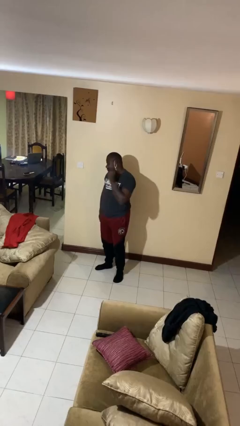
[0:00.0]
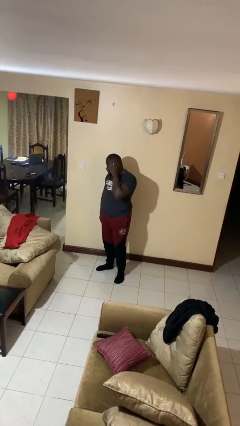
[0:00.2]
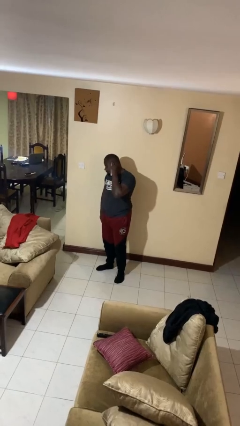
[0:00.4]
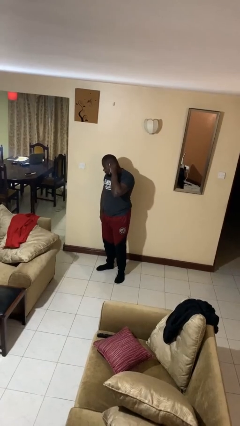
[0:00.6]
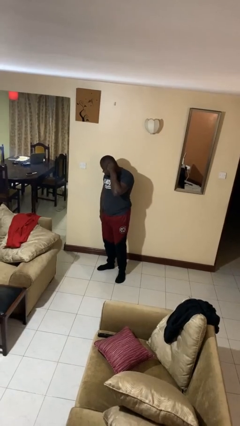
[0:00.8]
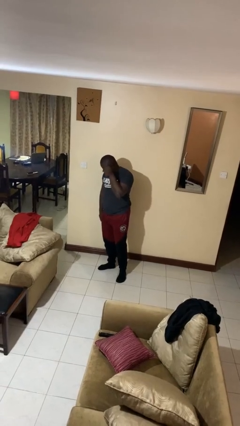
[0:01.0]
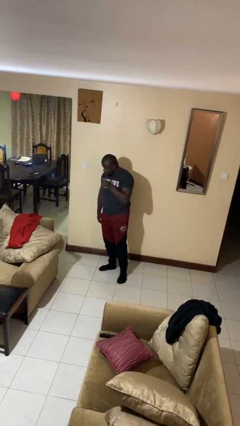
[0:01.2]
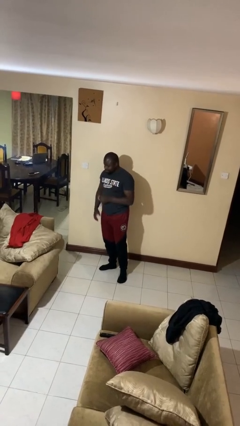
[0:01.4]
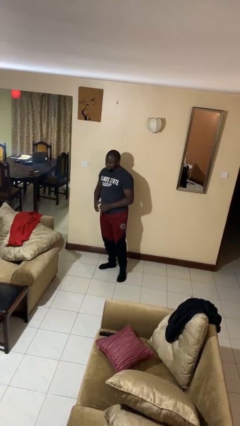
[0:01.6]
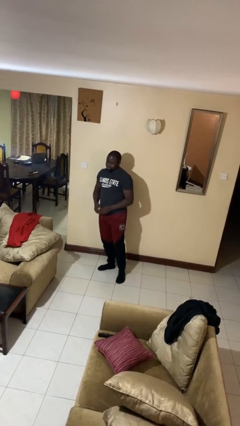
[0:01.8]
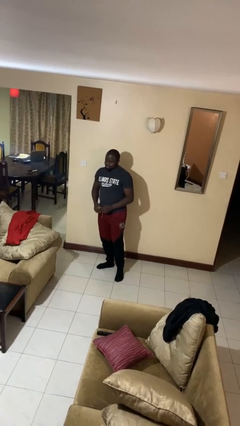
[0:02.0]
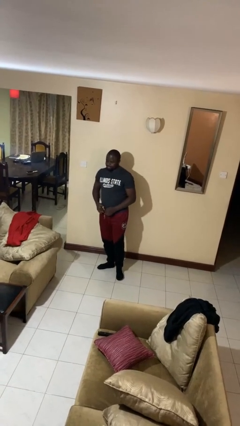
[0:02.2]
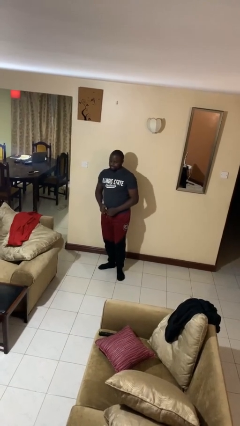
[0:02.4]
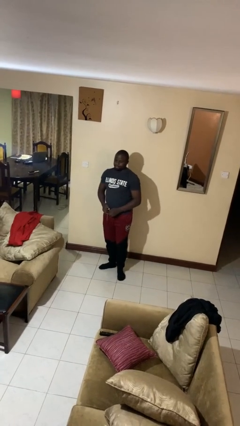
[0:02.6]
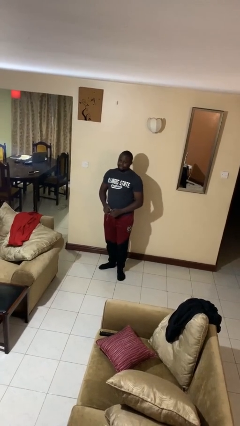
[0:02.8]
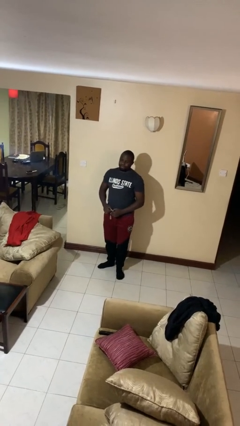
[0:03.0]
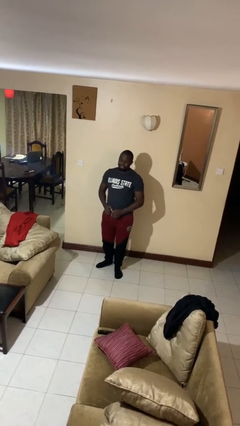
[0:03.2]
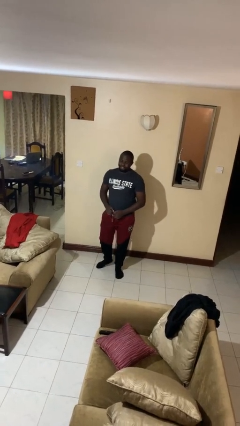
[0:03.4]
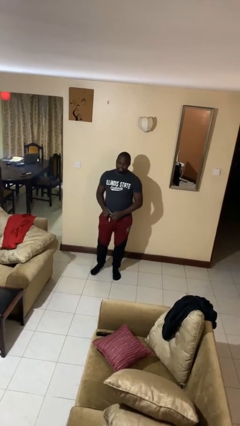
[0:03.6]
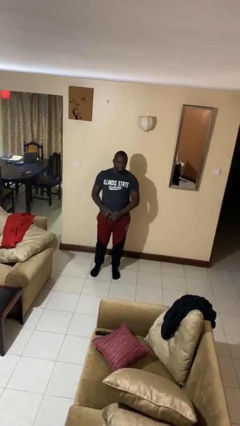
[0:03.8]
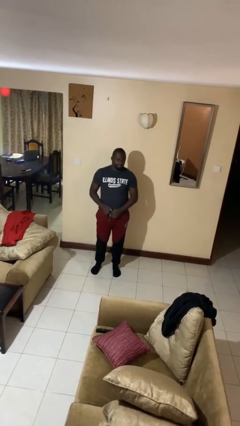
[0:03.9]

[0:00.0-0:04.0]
person takes off earrings

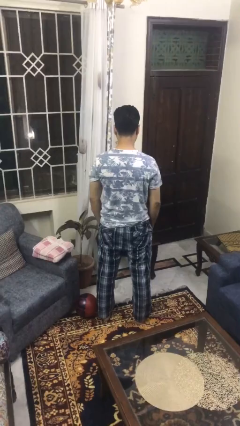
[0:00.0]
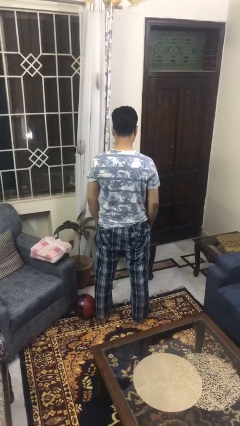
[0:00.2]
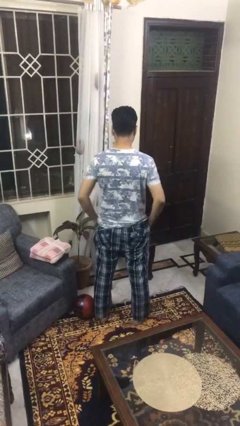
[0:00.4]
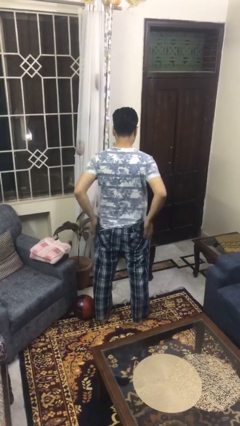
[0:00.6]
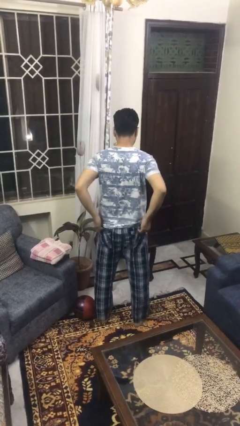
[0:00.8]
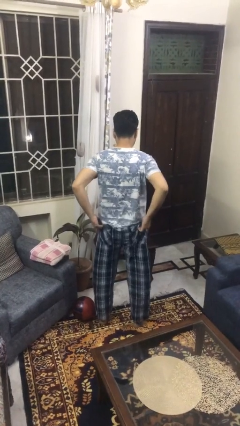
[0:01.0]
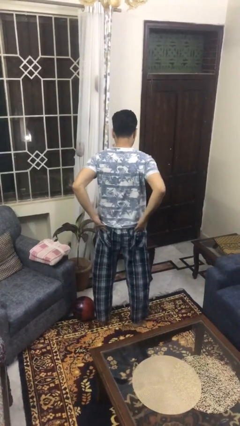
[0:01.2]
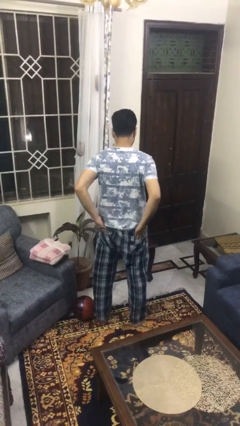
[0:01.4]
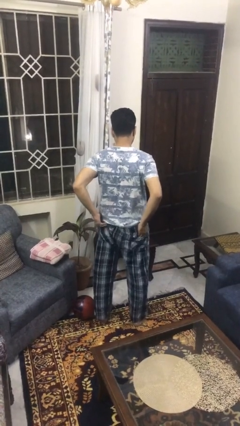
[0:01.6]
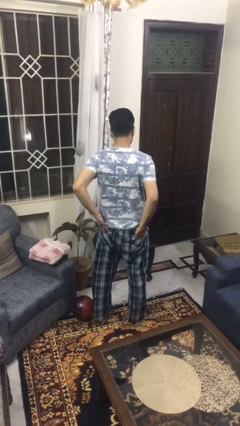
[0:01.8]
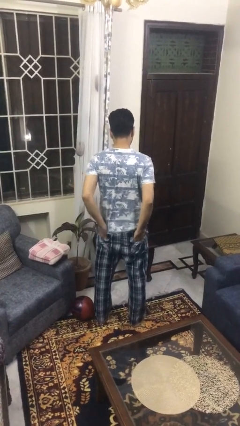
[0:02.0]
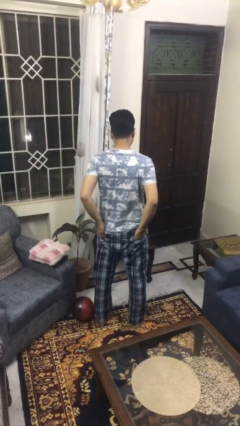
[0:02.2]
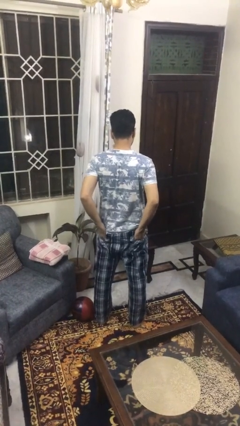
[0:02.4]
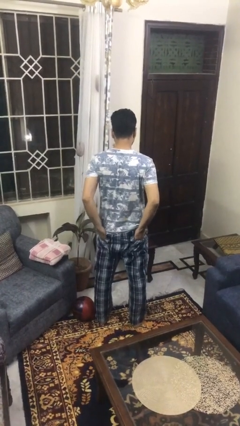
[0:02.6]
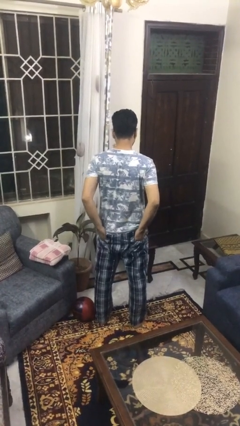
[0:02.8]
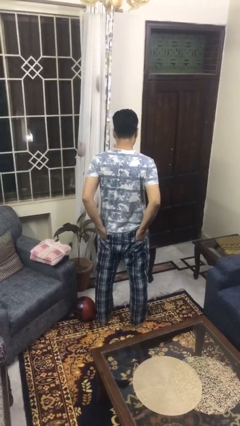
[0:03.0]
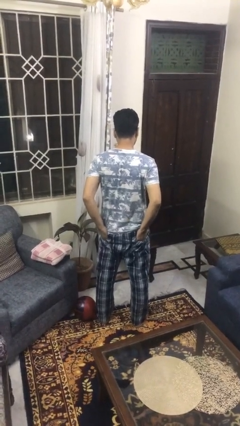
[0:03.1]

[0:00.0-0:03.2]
person puts hands in back pockets

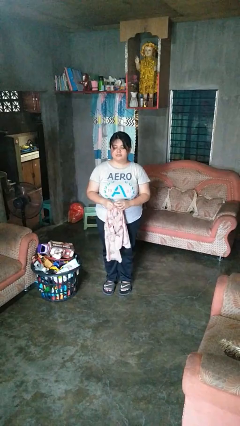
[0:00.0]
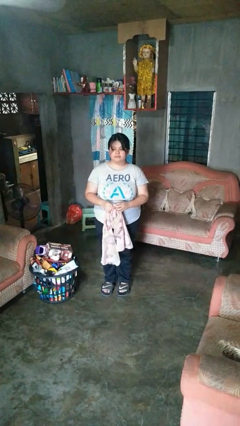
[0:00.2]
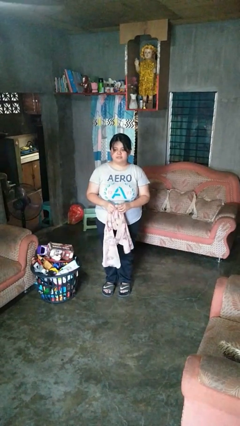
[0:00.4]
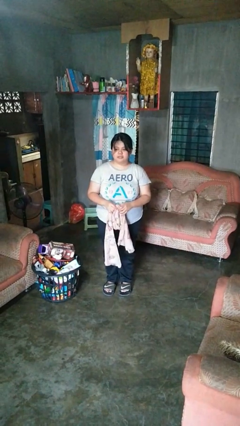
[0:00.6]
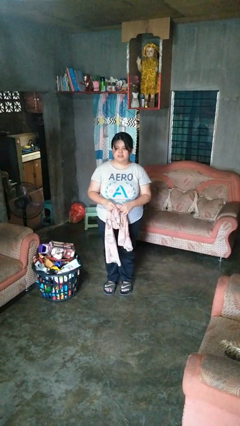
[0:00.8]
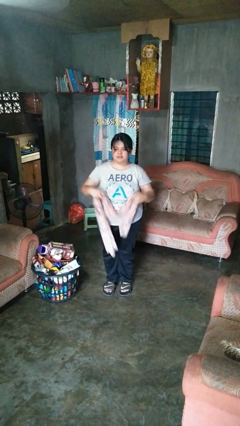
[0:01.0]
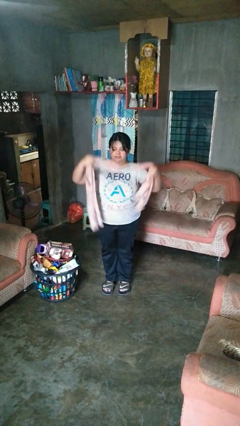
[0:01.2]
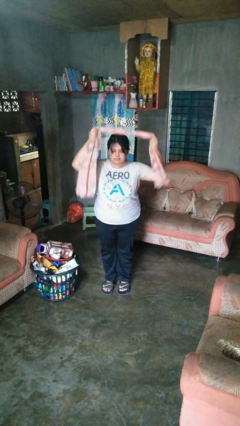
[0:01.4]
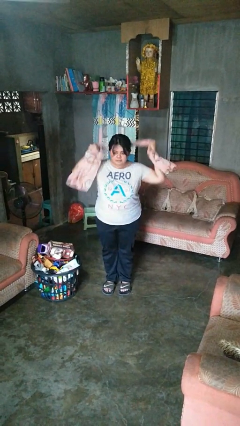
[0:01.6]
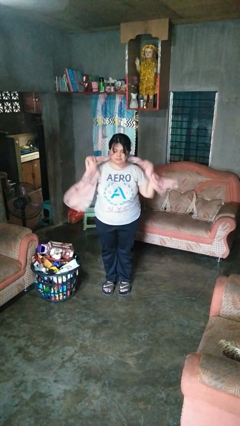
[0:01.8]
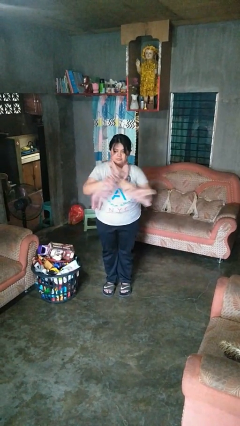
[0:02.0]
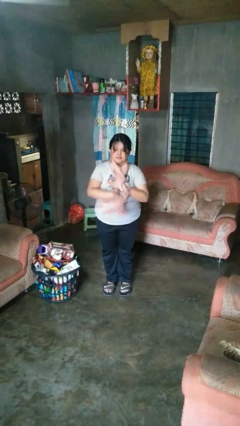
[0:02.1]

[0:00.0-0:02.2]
person puts on scarf

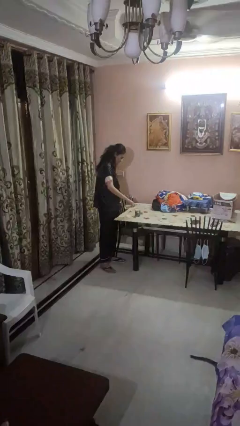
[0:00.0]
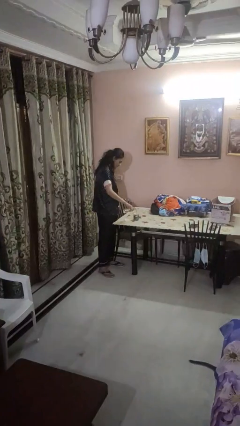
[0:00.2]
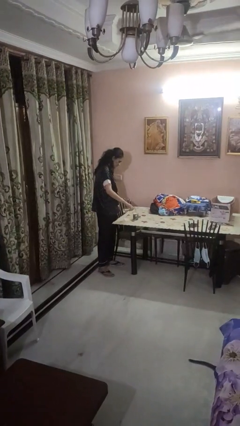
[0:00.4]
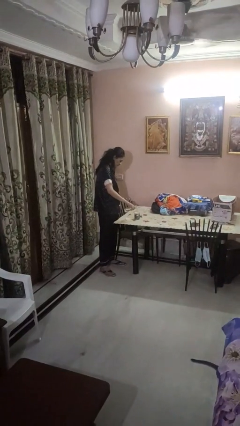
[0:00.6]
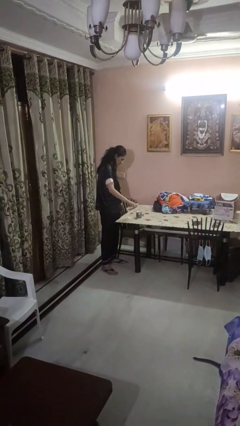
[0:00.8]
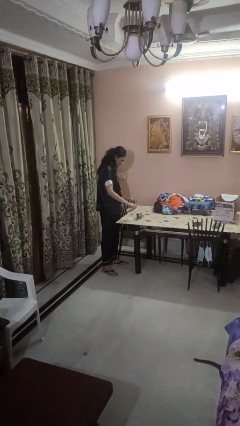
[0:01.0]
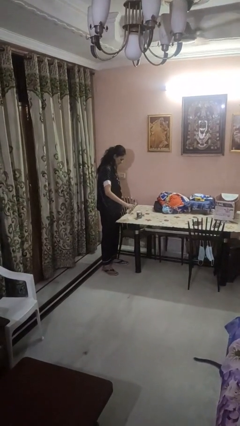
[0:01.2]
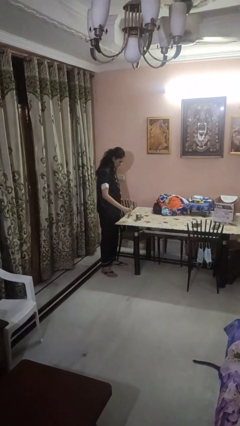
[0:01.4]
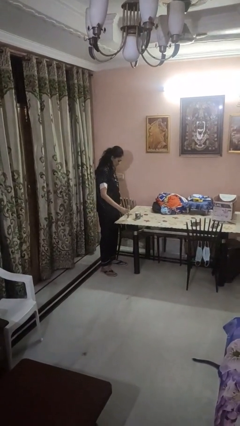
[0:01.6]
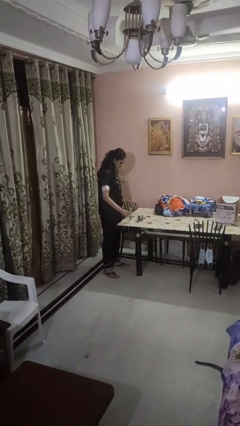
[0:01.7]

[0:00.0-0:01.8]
person pours liquid into cup

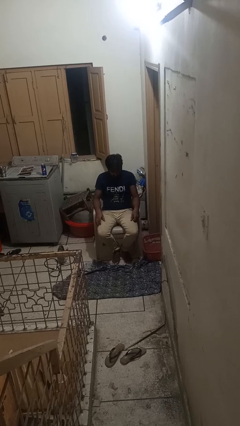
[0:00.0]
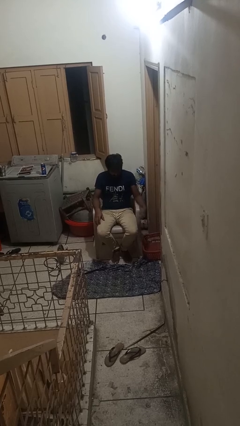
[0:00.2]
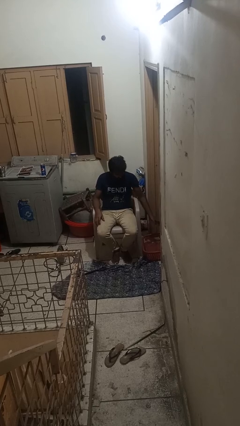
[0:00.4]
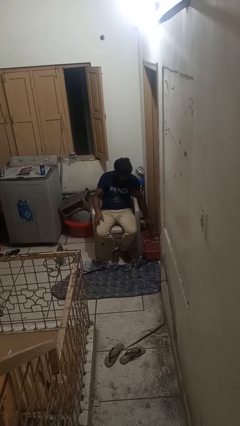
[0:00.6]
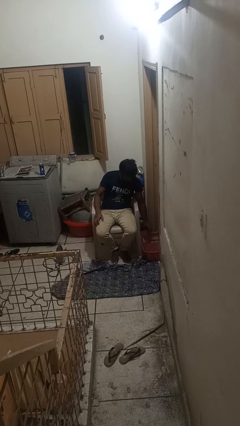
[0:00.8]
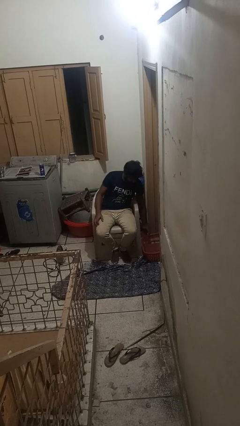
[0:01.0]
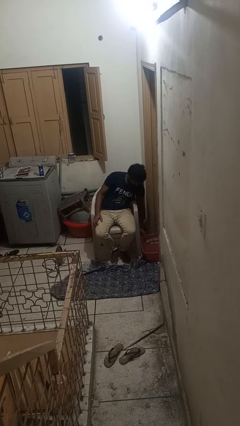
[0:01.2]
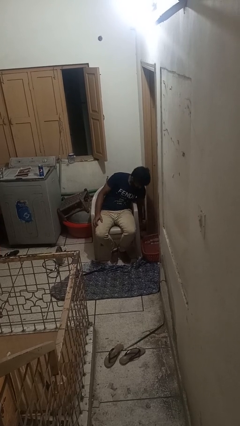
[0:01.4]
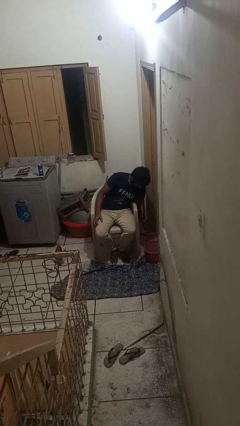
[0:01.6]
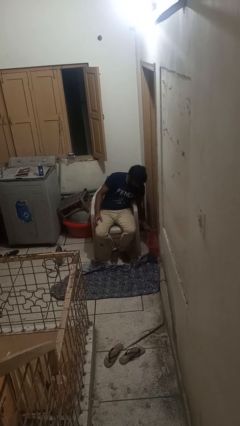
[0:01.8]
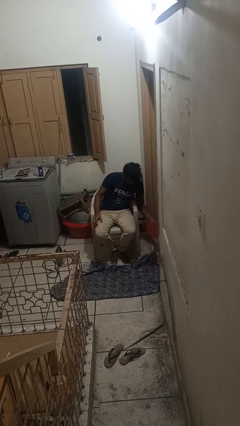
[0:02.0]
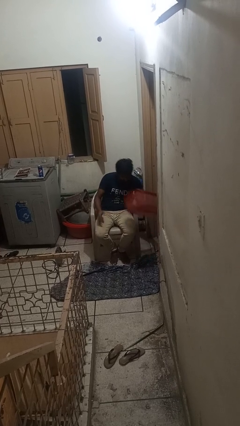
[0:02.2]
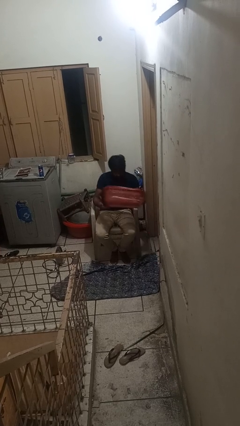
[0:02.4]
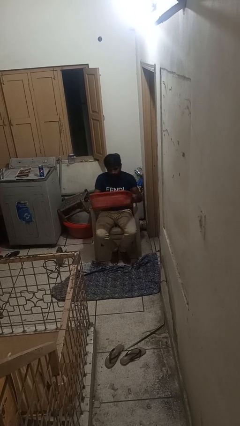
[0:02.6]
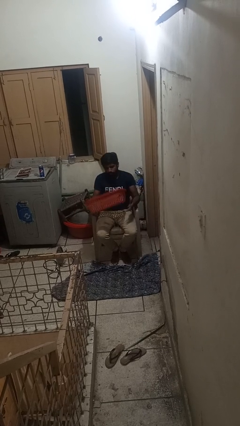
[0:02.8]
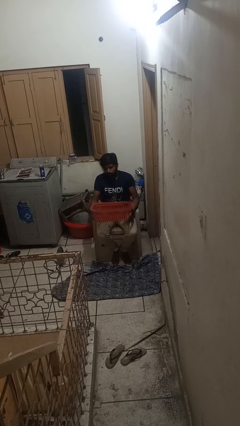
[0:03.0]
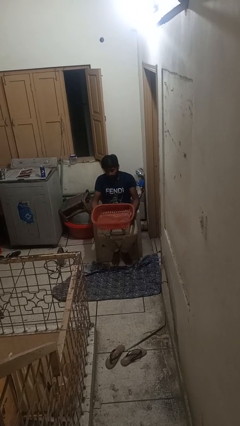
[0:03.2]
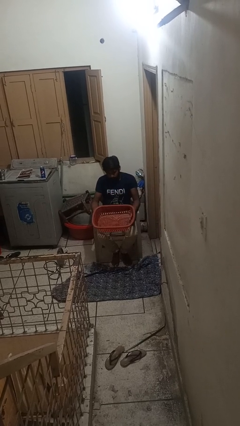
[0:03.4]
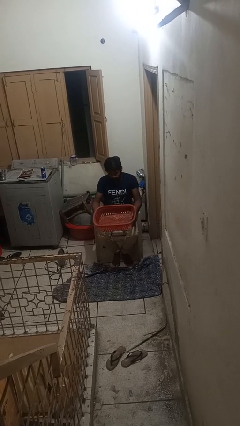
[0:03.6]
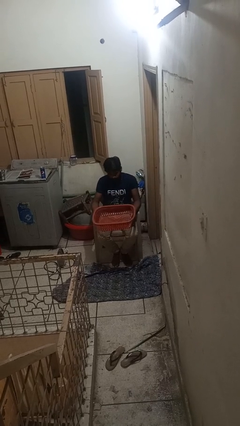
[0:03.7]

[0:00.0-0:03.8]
person picks up object from floor

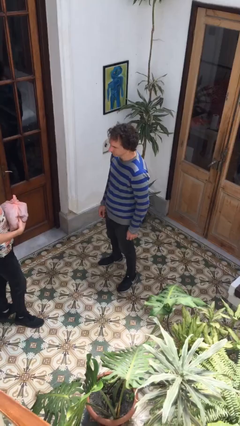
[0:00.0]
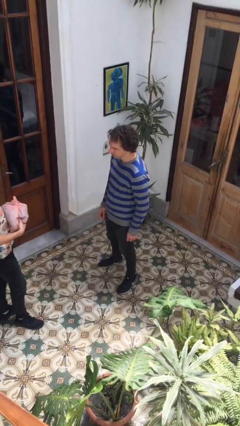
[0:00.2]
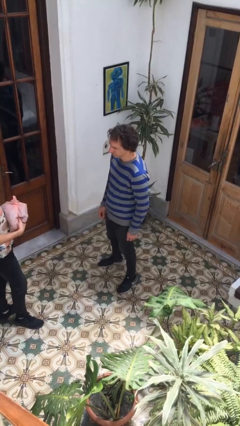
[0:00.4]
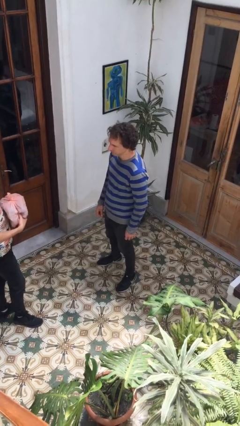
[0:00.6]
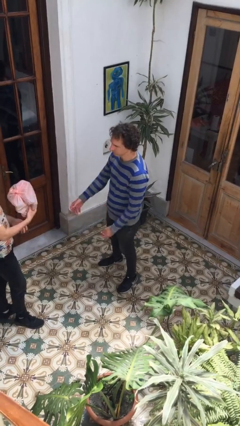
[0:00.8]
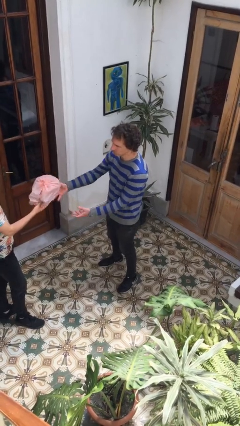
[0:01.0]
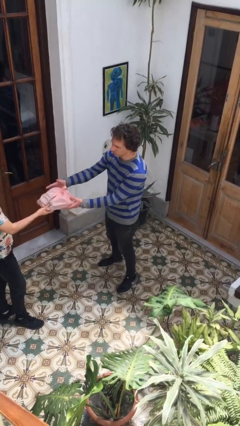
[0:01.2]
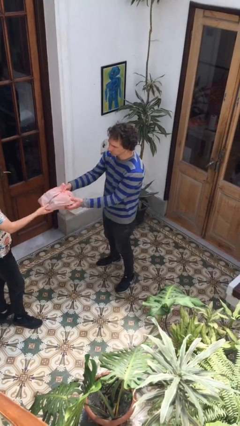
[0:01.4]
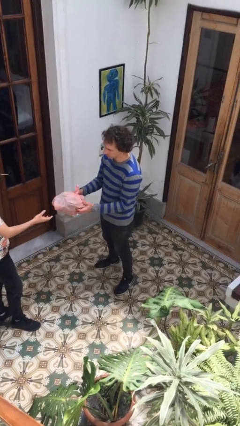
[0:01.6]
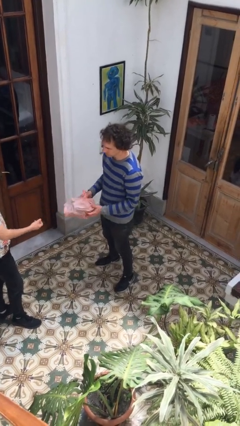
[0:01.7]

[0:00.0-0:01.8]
person transfers object to person
